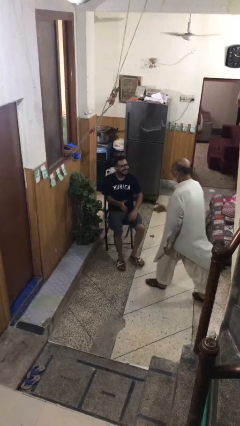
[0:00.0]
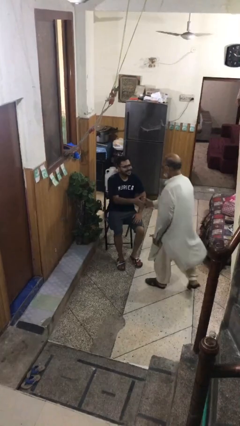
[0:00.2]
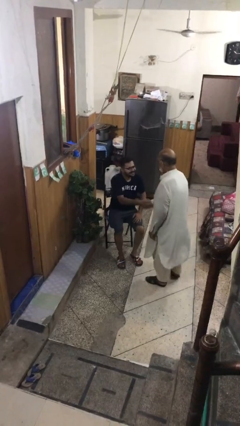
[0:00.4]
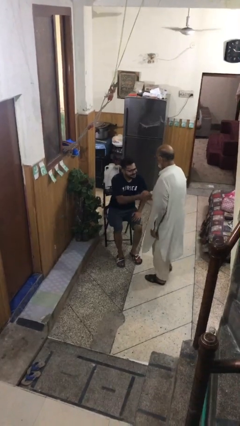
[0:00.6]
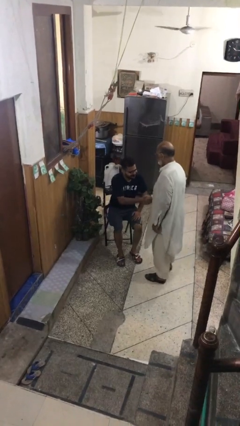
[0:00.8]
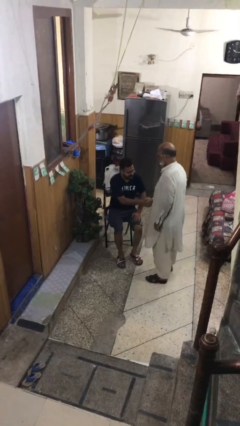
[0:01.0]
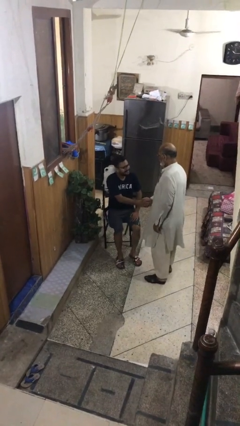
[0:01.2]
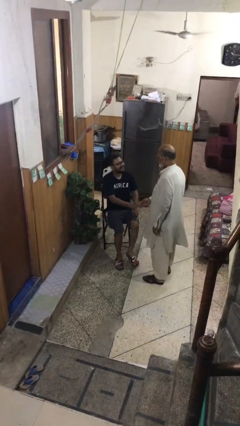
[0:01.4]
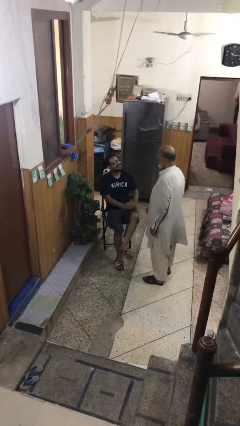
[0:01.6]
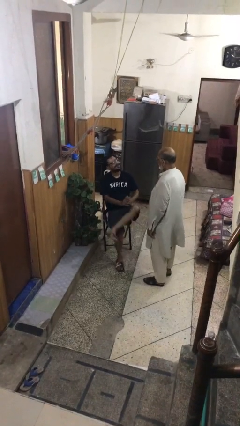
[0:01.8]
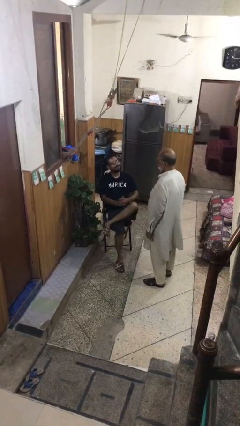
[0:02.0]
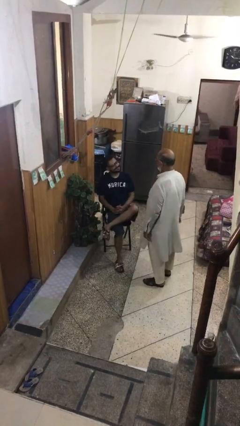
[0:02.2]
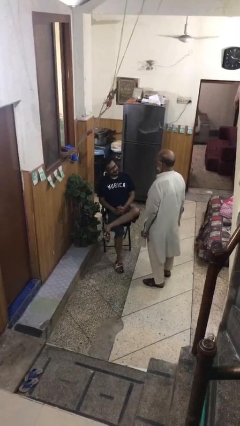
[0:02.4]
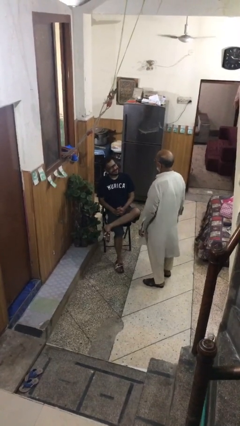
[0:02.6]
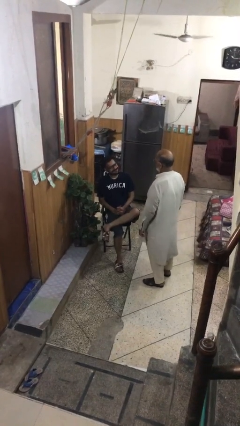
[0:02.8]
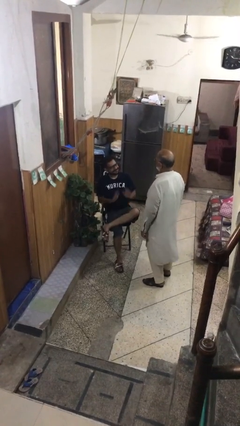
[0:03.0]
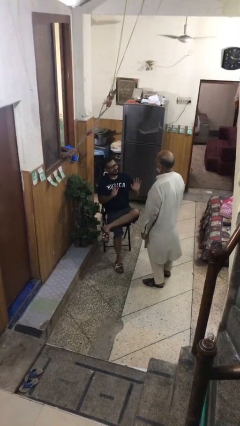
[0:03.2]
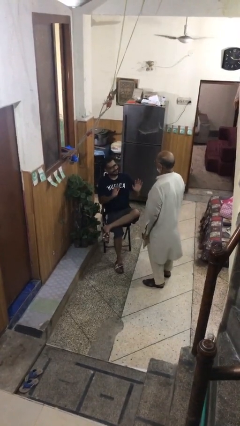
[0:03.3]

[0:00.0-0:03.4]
person shakes hand

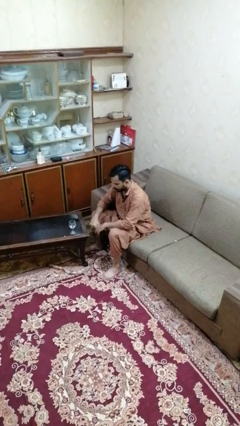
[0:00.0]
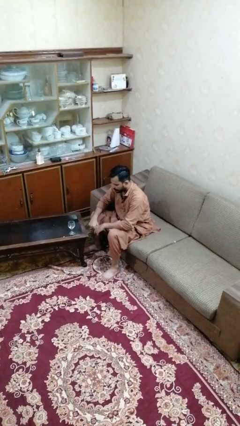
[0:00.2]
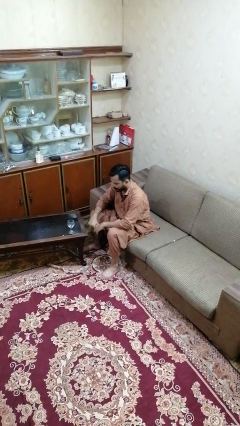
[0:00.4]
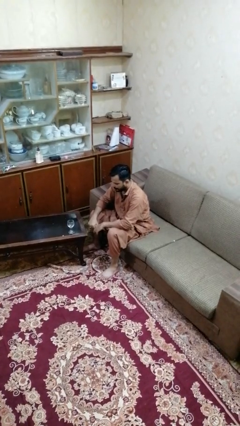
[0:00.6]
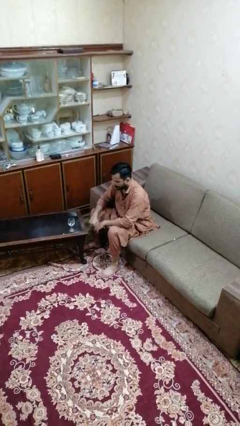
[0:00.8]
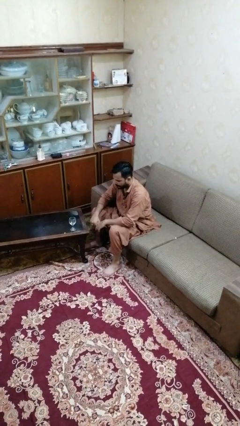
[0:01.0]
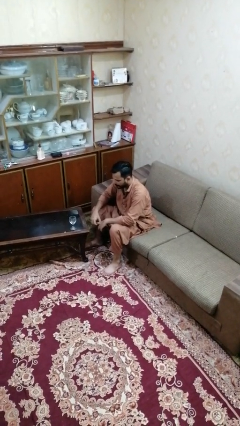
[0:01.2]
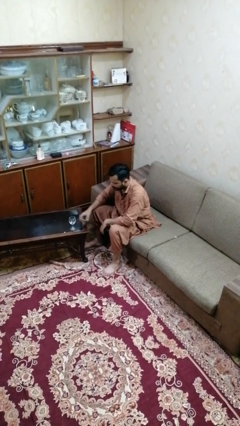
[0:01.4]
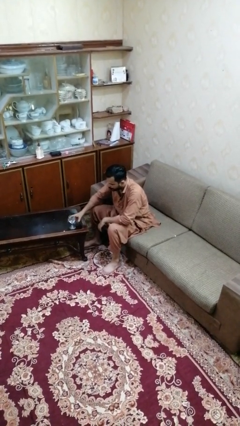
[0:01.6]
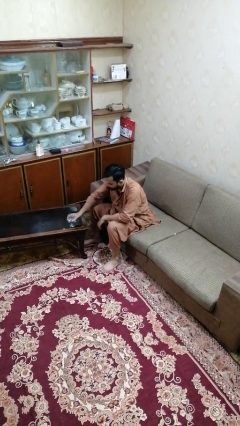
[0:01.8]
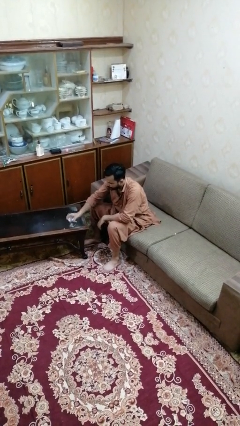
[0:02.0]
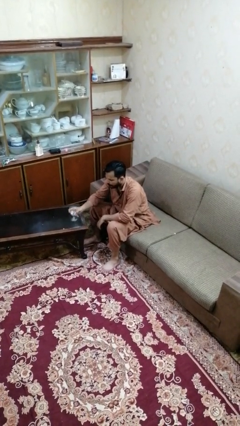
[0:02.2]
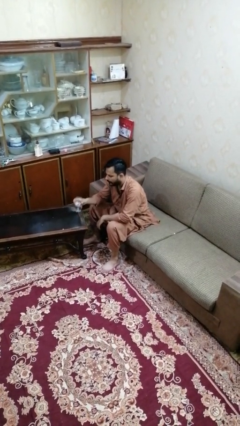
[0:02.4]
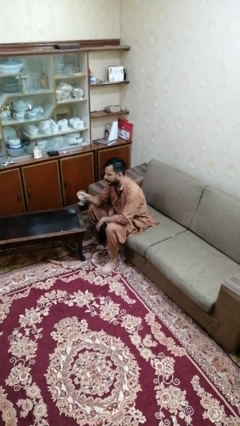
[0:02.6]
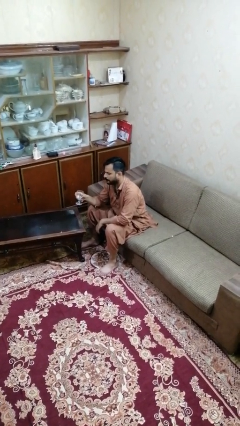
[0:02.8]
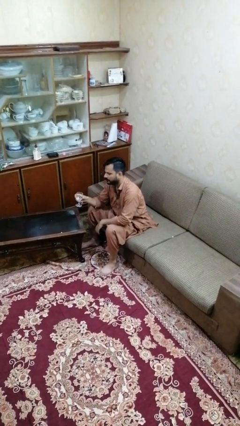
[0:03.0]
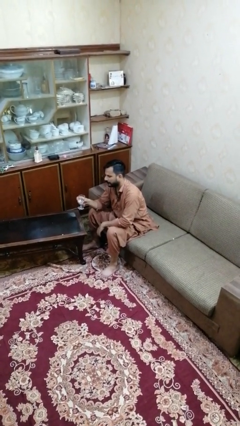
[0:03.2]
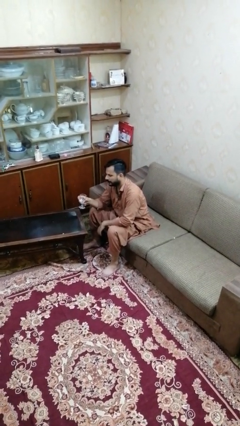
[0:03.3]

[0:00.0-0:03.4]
person picks up object from table

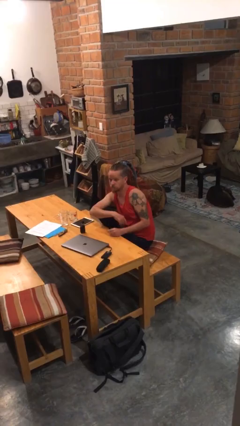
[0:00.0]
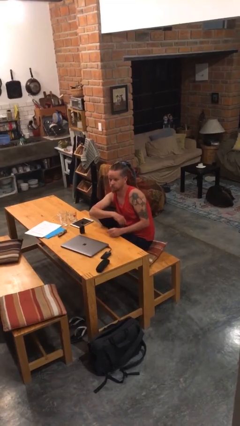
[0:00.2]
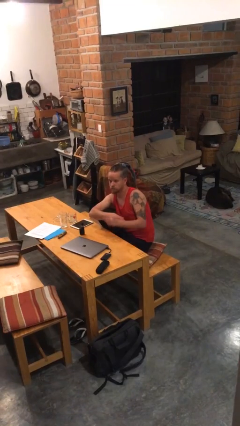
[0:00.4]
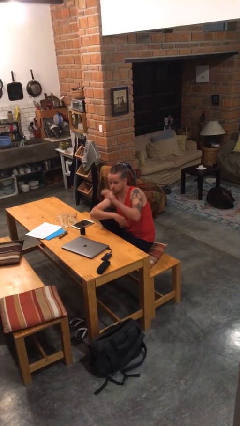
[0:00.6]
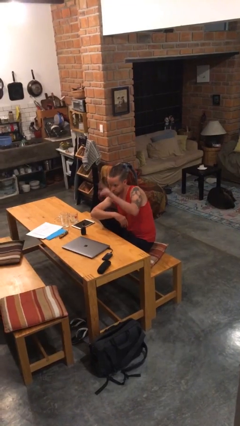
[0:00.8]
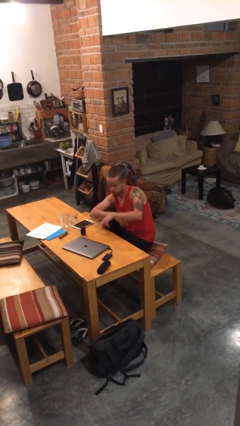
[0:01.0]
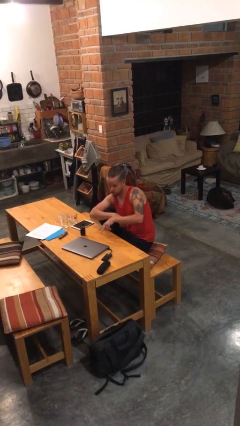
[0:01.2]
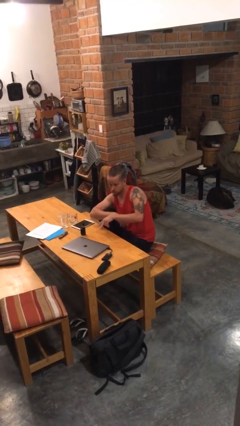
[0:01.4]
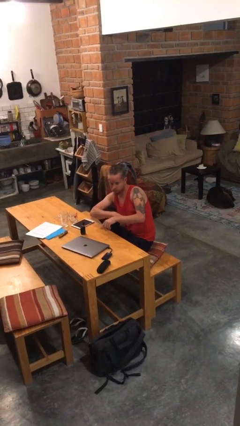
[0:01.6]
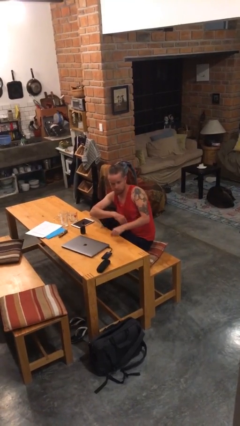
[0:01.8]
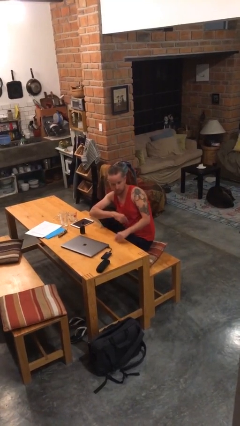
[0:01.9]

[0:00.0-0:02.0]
person gestures swipe down

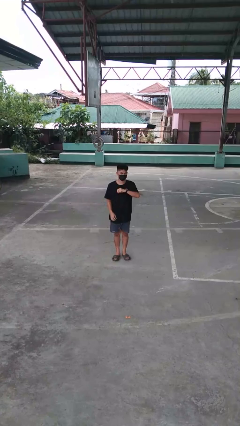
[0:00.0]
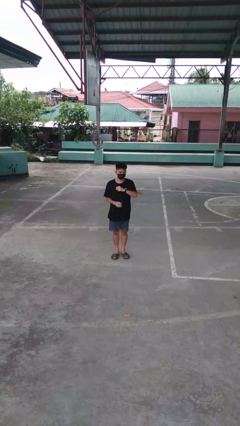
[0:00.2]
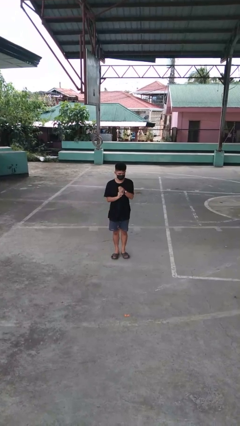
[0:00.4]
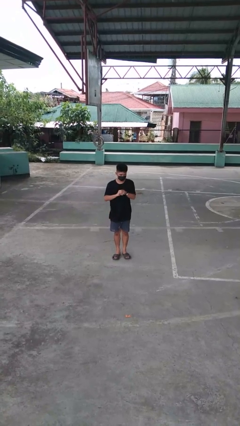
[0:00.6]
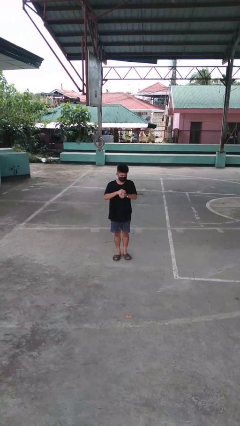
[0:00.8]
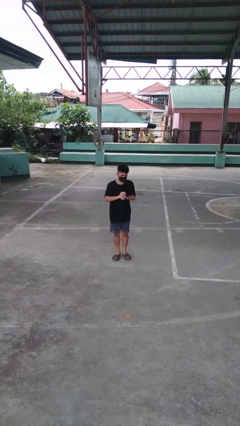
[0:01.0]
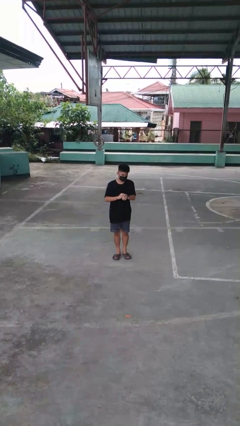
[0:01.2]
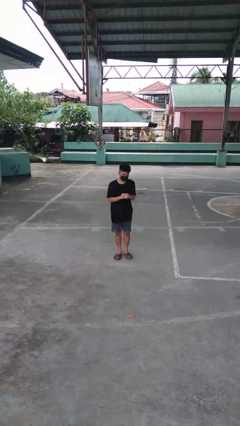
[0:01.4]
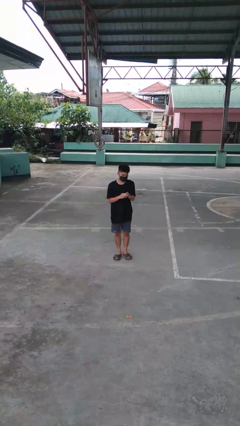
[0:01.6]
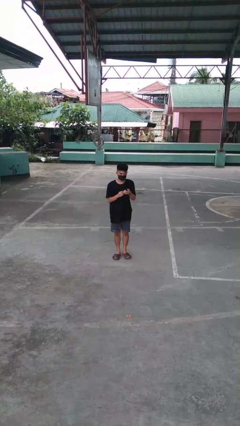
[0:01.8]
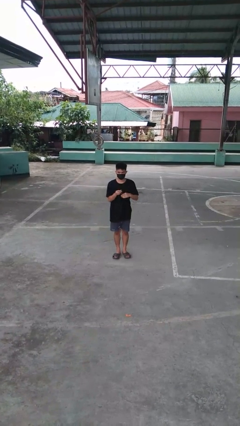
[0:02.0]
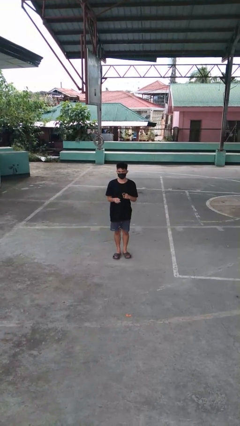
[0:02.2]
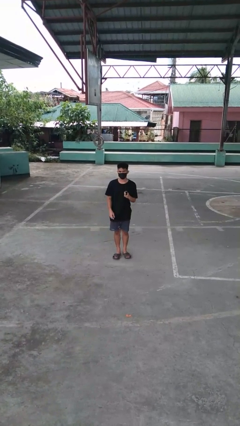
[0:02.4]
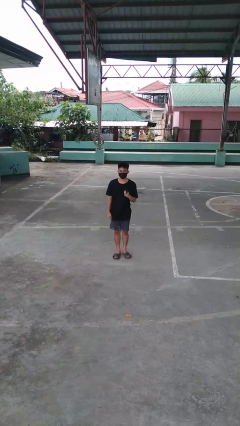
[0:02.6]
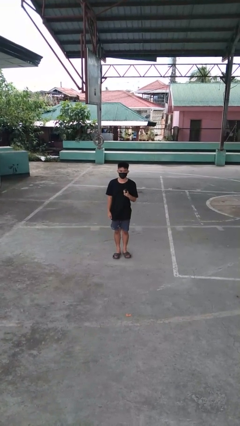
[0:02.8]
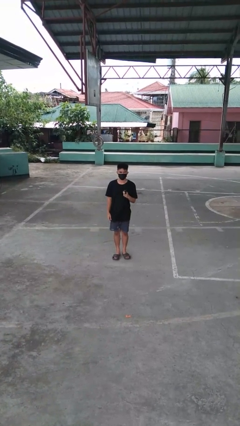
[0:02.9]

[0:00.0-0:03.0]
person takes off wristwatch

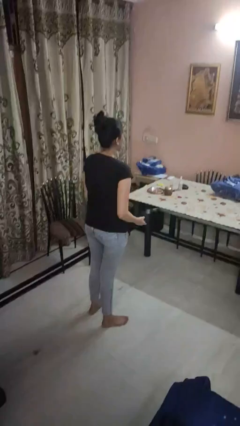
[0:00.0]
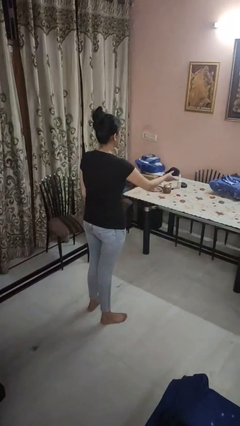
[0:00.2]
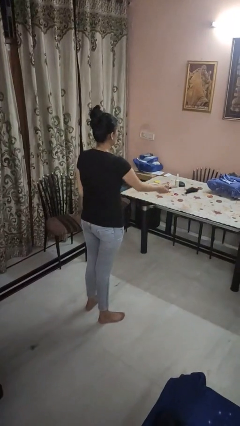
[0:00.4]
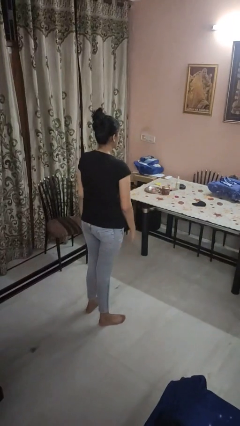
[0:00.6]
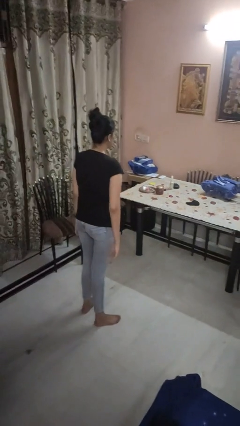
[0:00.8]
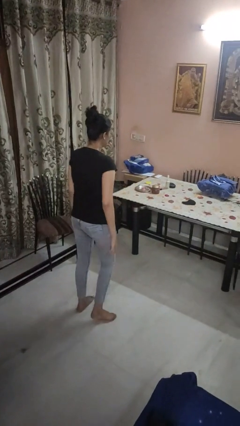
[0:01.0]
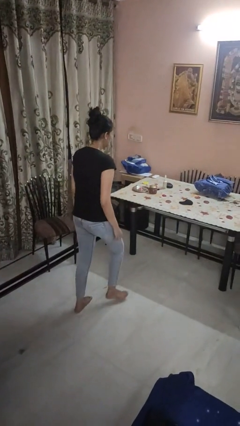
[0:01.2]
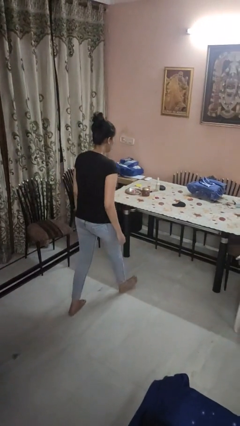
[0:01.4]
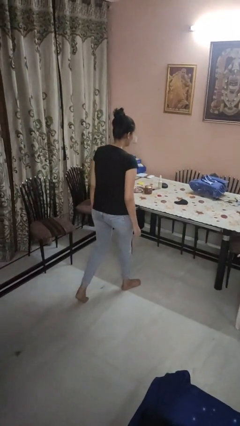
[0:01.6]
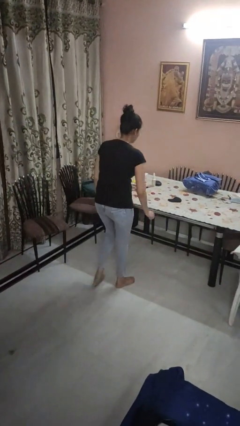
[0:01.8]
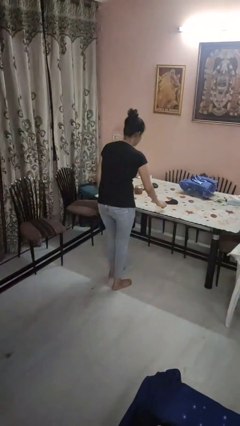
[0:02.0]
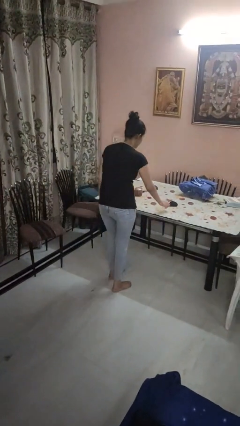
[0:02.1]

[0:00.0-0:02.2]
person throws object on table

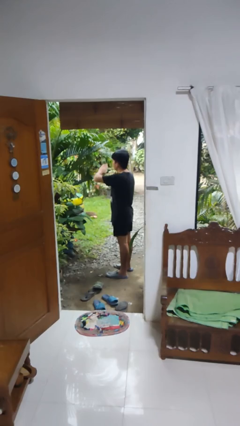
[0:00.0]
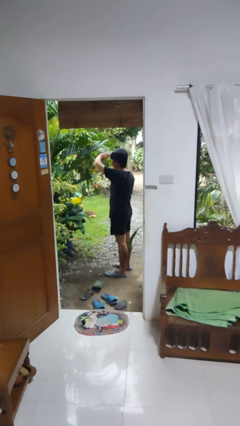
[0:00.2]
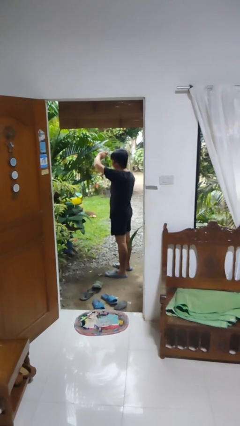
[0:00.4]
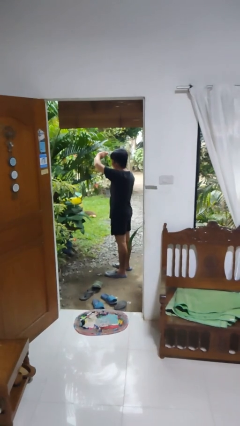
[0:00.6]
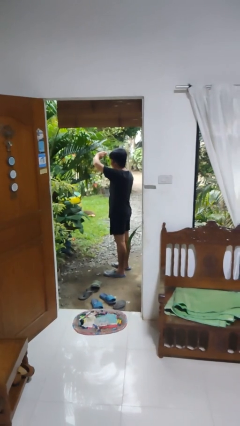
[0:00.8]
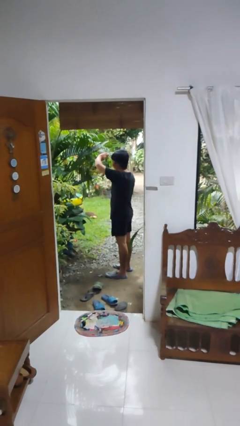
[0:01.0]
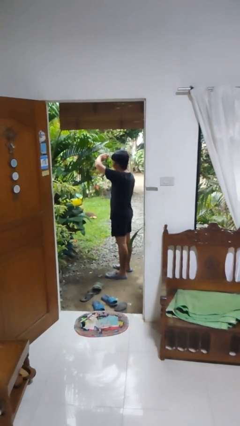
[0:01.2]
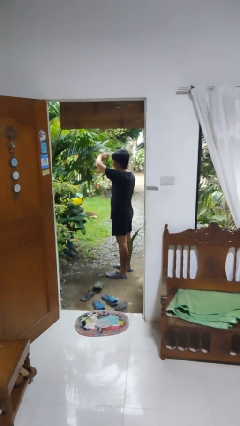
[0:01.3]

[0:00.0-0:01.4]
person shades eyes

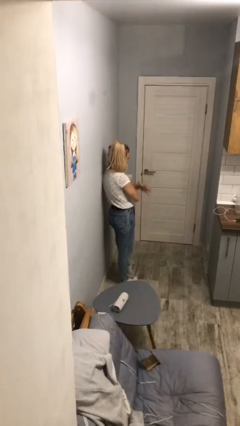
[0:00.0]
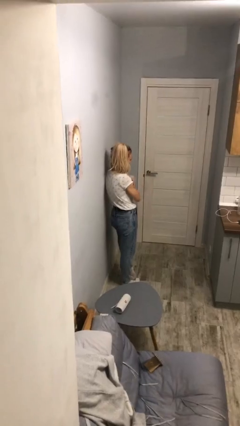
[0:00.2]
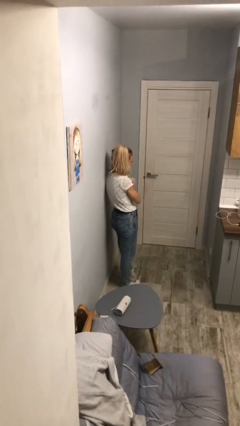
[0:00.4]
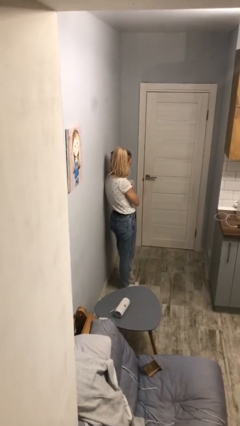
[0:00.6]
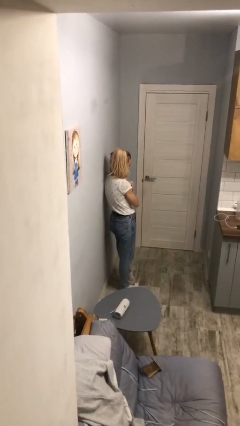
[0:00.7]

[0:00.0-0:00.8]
person crosses arms

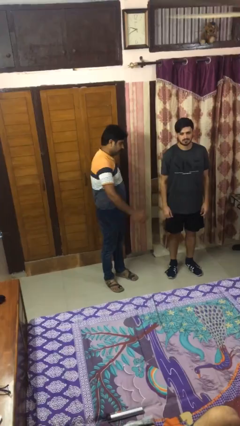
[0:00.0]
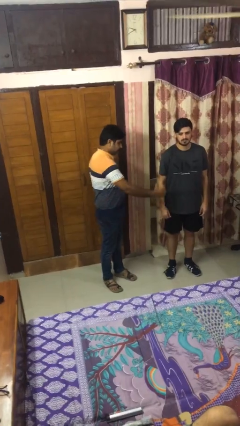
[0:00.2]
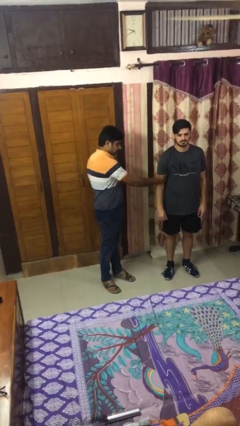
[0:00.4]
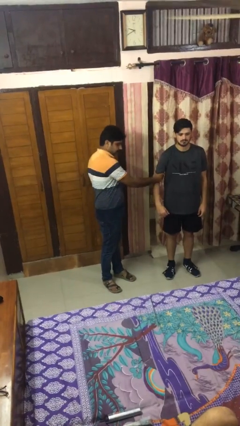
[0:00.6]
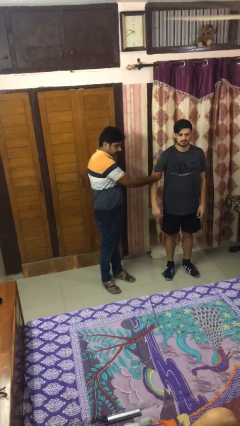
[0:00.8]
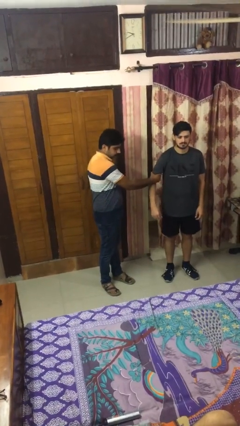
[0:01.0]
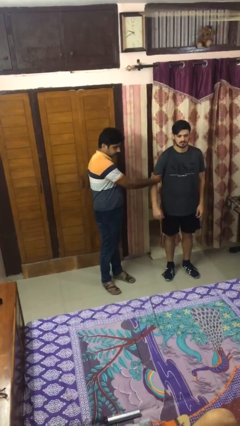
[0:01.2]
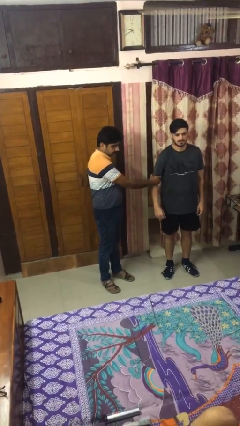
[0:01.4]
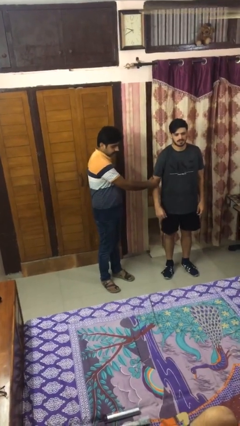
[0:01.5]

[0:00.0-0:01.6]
person grabs person by bicep
